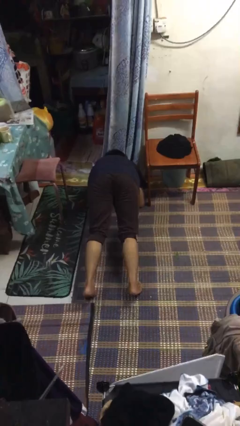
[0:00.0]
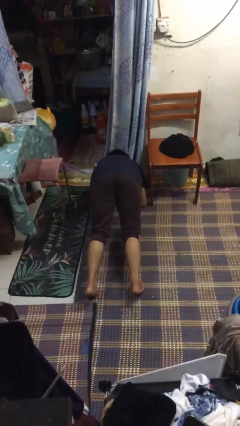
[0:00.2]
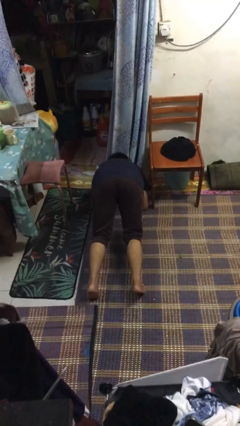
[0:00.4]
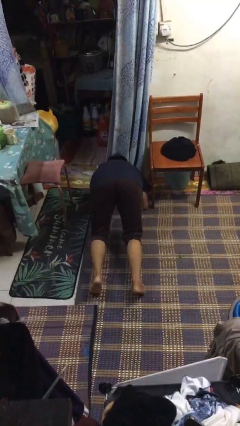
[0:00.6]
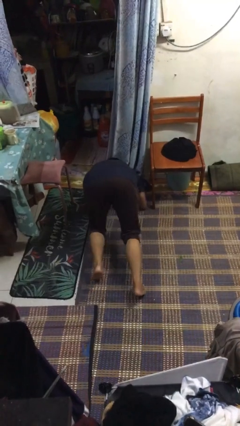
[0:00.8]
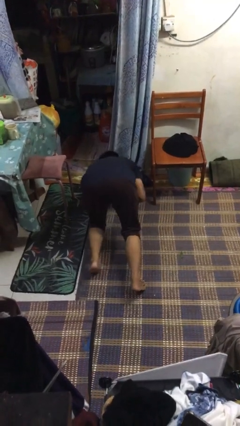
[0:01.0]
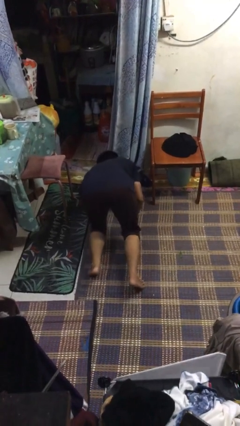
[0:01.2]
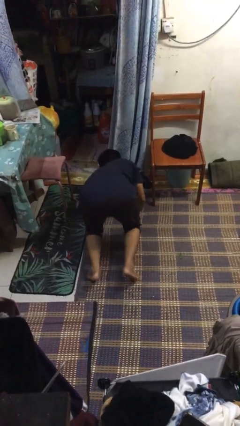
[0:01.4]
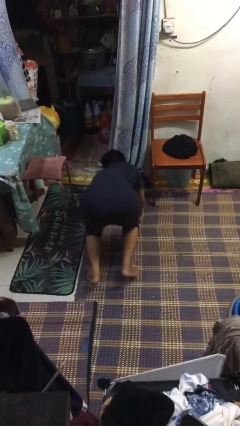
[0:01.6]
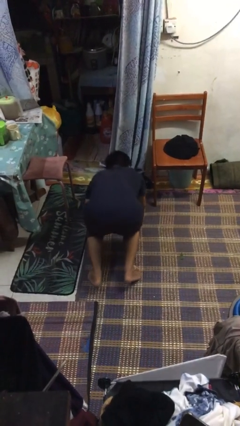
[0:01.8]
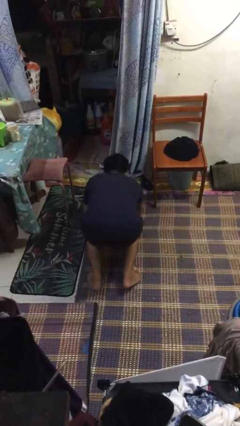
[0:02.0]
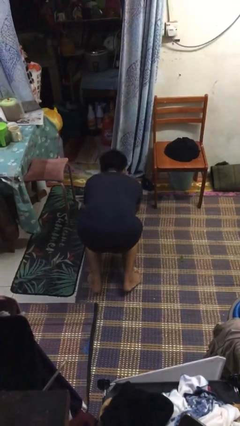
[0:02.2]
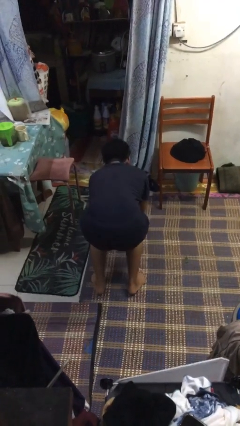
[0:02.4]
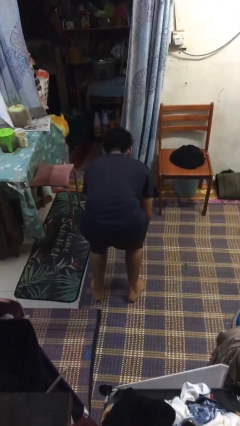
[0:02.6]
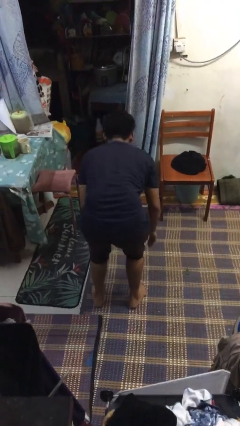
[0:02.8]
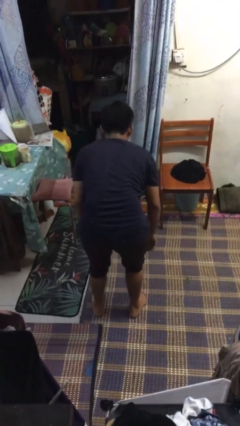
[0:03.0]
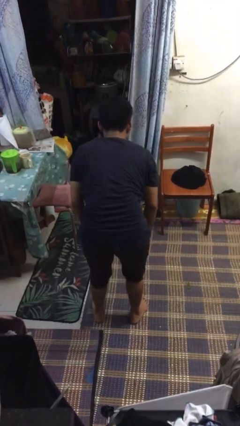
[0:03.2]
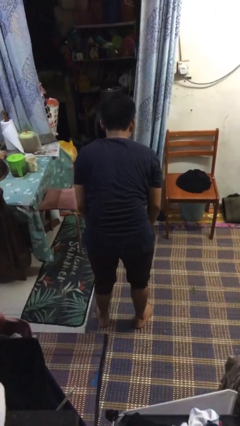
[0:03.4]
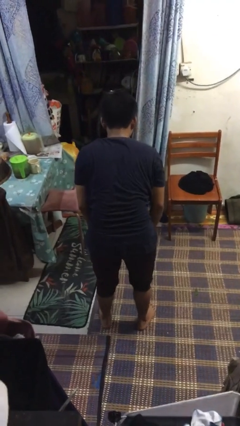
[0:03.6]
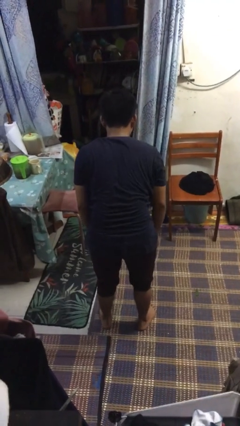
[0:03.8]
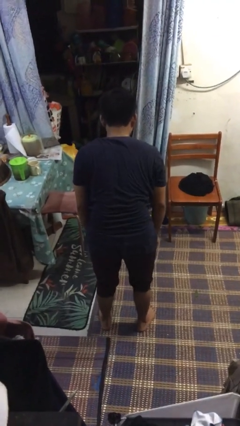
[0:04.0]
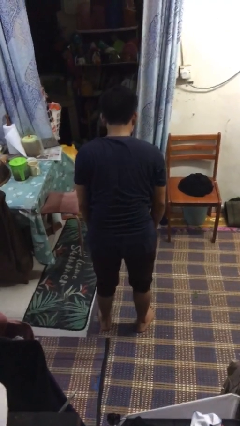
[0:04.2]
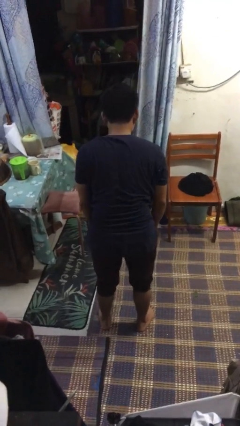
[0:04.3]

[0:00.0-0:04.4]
person stands up from floor

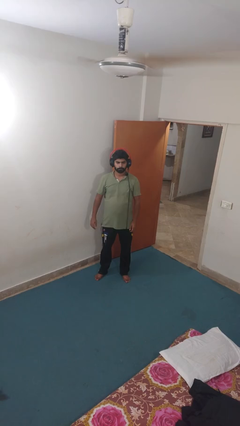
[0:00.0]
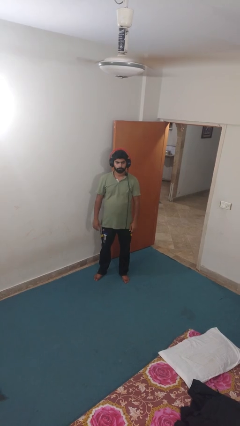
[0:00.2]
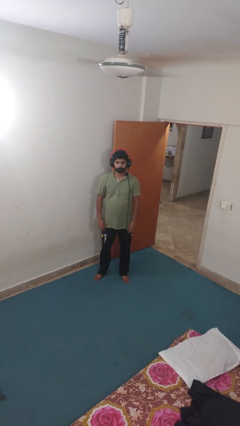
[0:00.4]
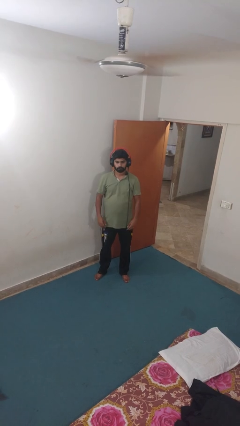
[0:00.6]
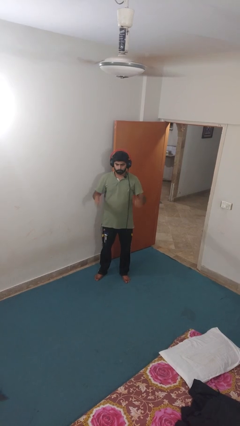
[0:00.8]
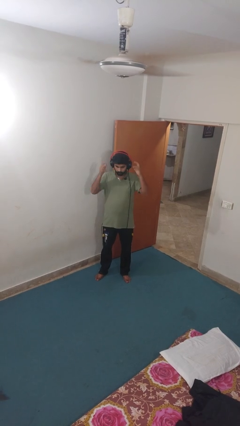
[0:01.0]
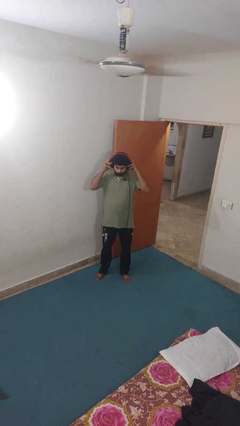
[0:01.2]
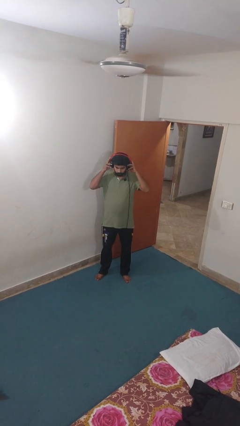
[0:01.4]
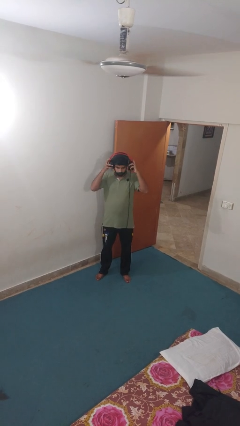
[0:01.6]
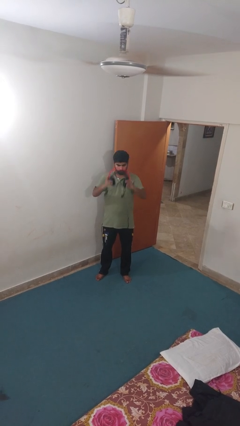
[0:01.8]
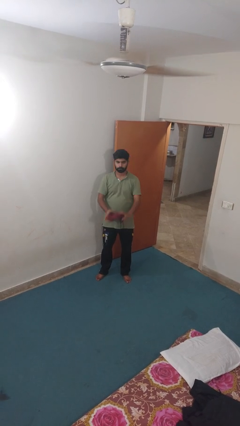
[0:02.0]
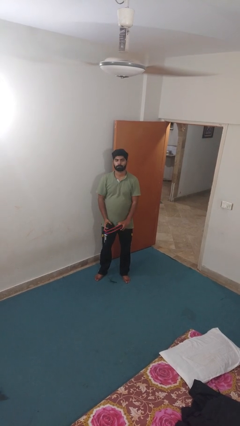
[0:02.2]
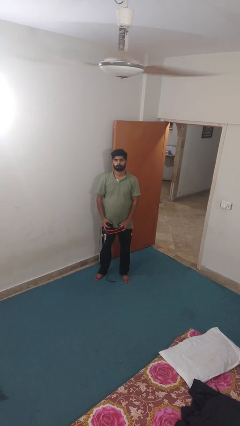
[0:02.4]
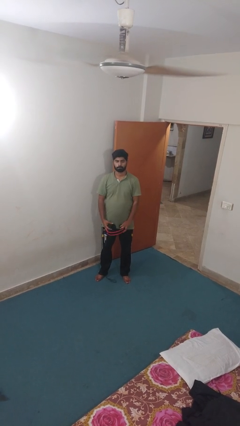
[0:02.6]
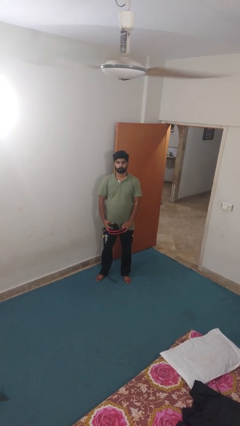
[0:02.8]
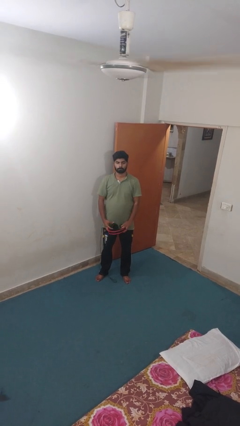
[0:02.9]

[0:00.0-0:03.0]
person takes off headphones

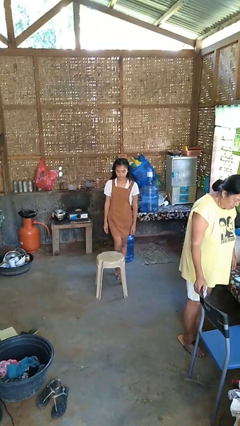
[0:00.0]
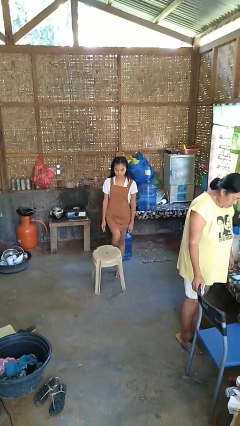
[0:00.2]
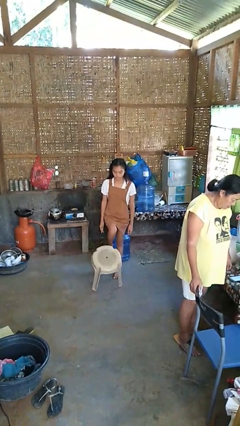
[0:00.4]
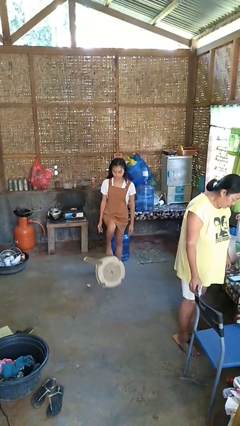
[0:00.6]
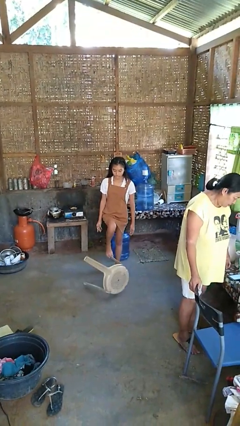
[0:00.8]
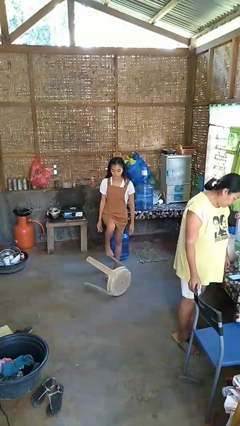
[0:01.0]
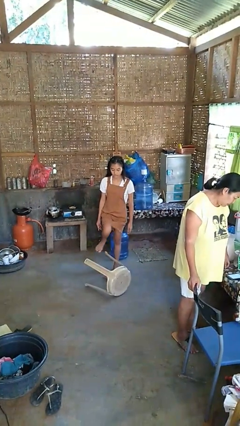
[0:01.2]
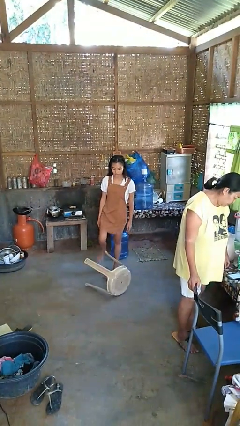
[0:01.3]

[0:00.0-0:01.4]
person knocks over furniture

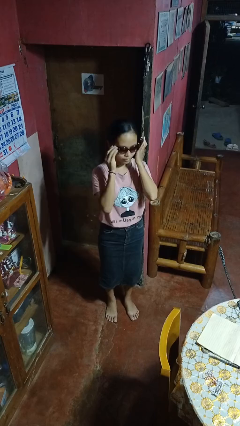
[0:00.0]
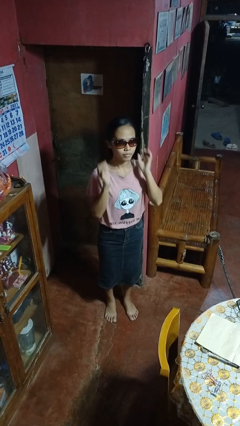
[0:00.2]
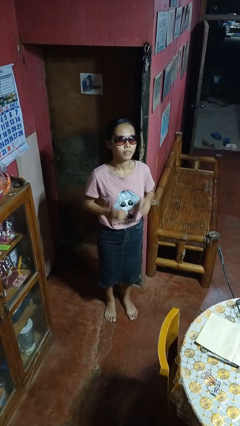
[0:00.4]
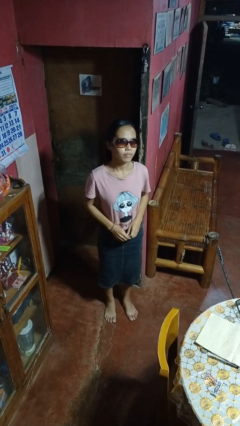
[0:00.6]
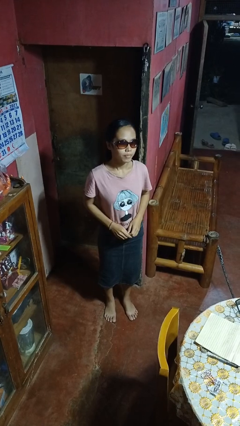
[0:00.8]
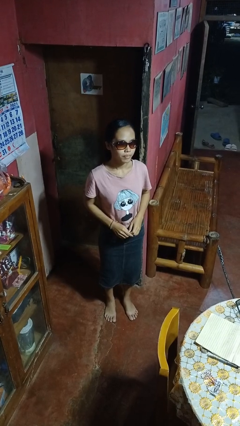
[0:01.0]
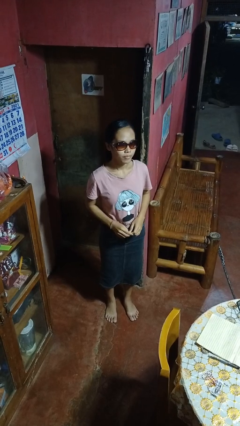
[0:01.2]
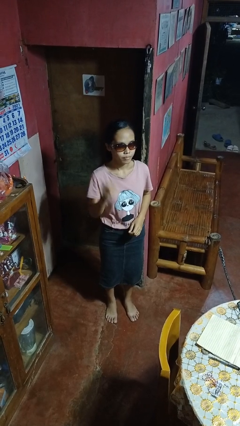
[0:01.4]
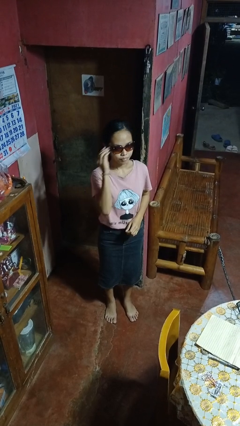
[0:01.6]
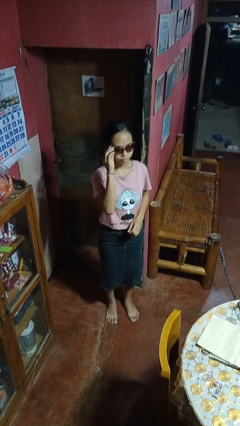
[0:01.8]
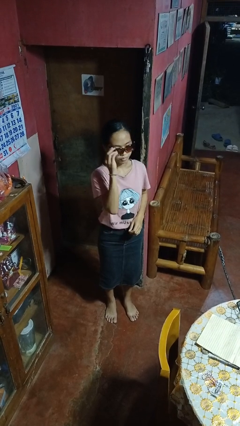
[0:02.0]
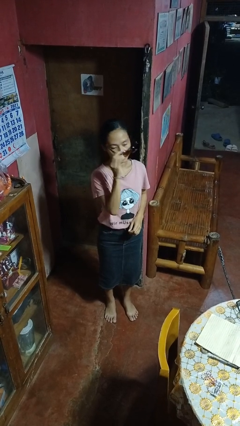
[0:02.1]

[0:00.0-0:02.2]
person puts on sunglasses

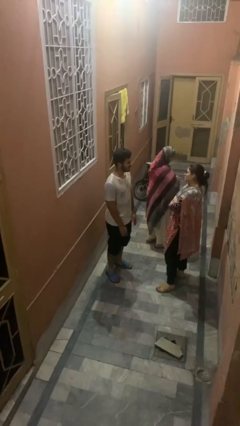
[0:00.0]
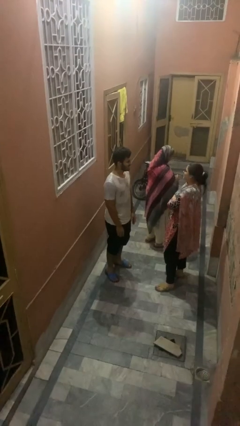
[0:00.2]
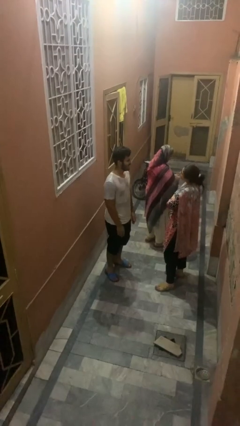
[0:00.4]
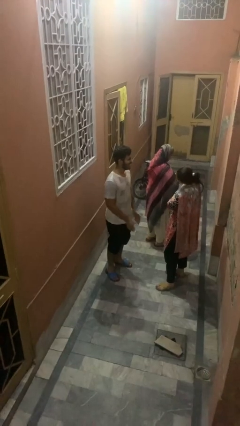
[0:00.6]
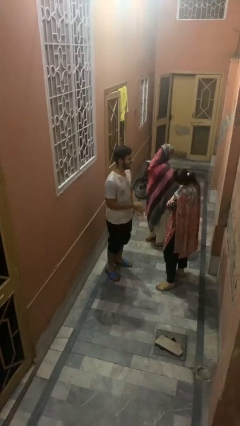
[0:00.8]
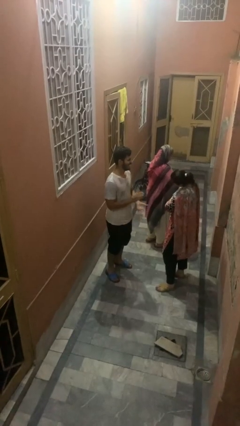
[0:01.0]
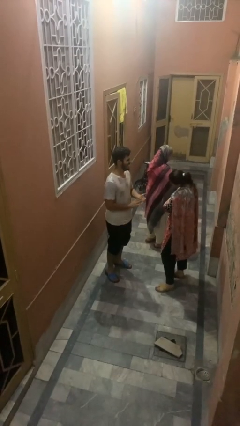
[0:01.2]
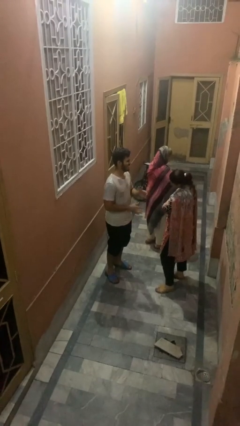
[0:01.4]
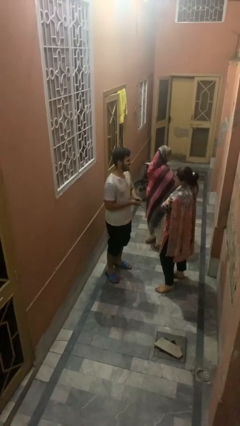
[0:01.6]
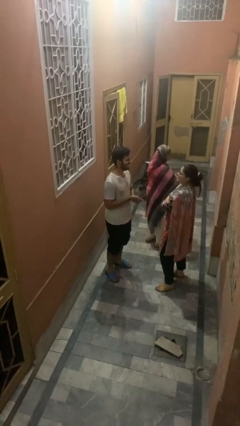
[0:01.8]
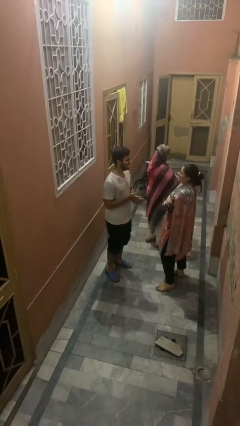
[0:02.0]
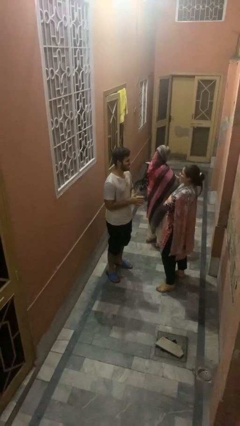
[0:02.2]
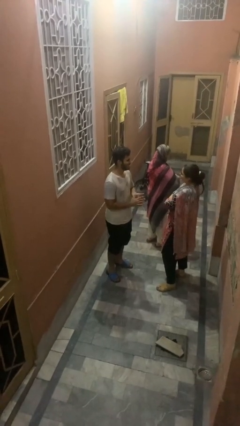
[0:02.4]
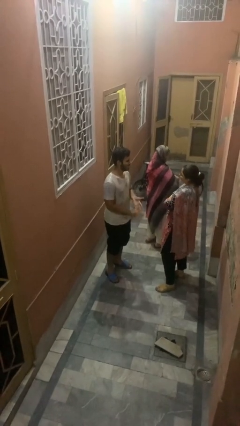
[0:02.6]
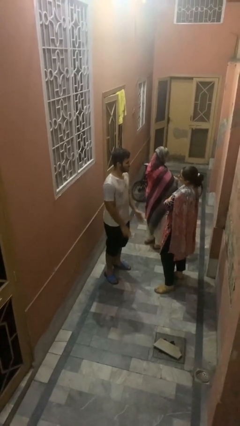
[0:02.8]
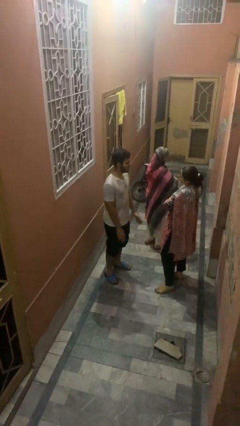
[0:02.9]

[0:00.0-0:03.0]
person laughs with person

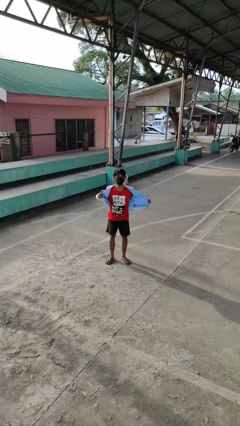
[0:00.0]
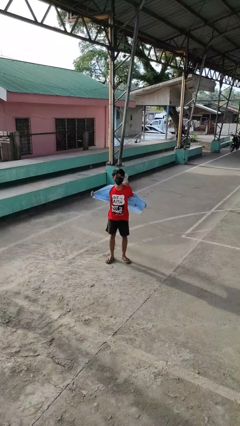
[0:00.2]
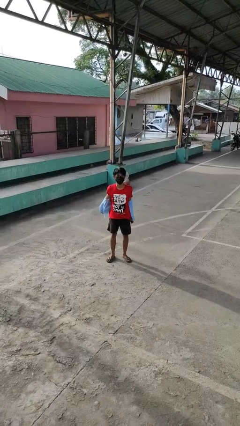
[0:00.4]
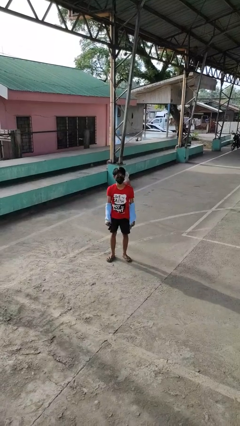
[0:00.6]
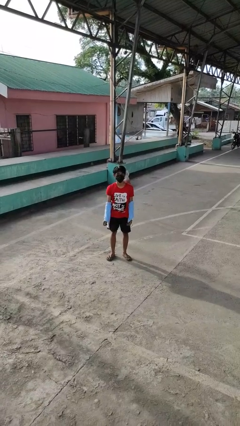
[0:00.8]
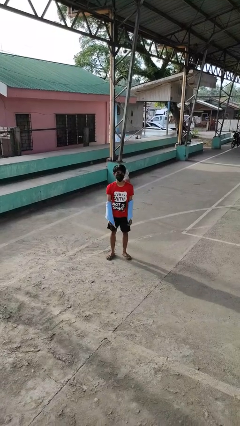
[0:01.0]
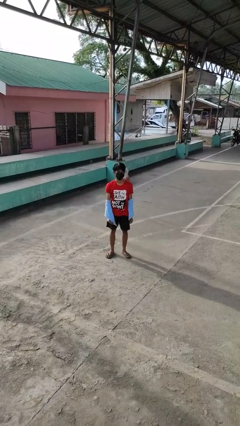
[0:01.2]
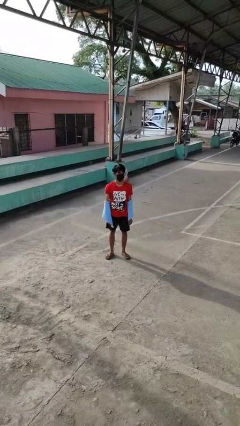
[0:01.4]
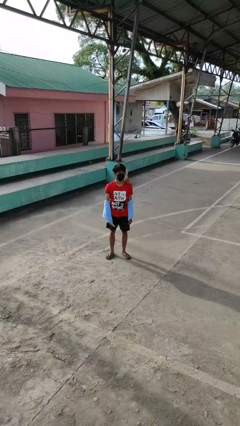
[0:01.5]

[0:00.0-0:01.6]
person takes off jacket

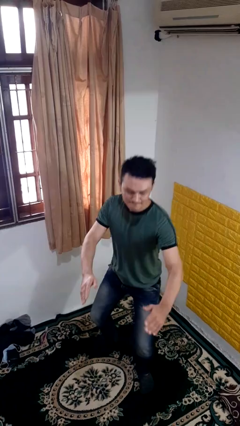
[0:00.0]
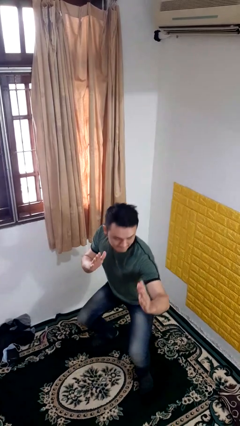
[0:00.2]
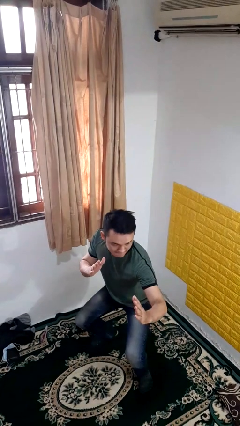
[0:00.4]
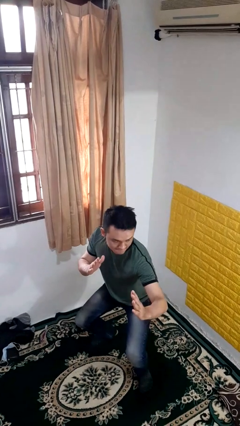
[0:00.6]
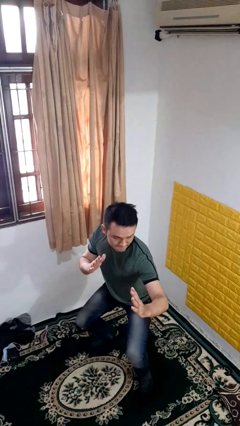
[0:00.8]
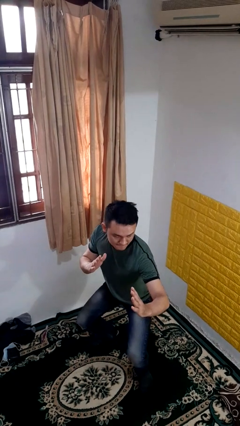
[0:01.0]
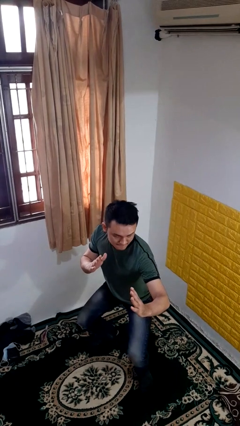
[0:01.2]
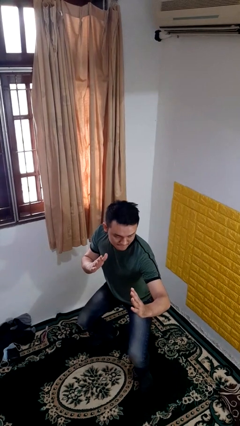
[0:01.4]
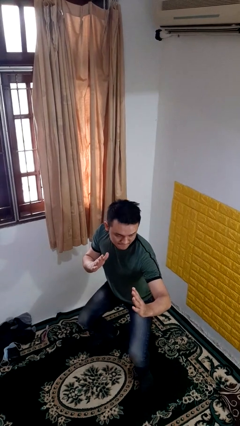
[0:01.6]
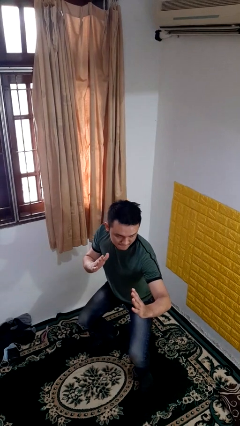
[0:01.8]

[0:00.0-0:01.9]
person karate chop
